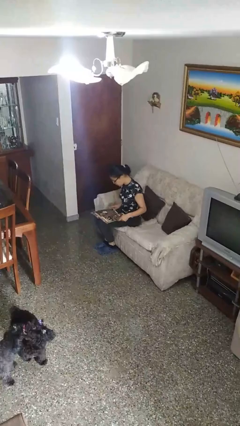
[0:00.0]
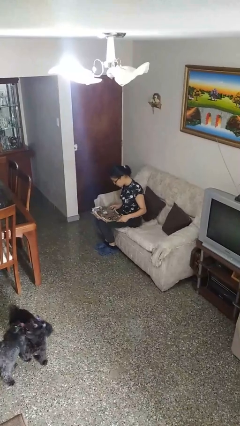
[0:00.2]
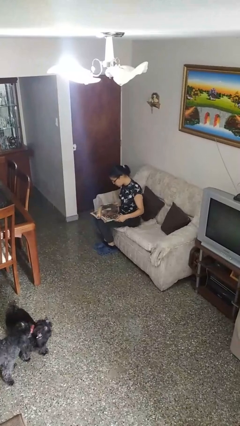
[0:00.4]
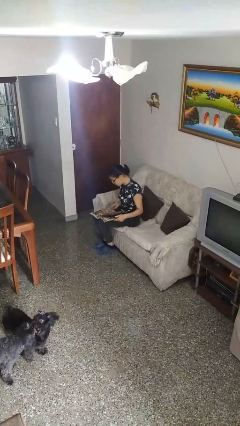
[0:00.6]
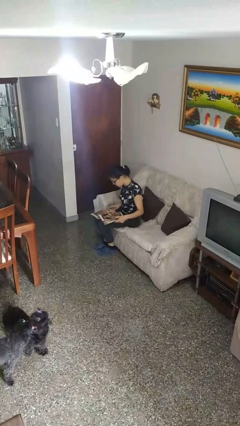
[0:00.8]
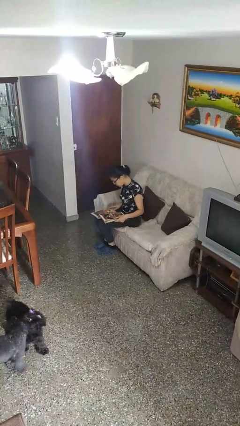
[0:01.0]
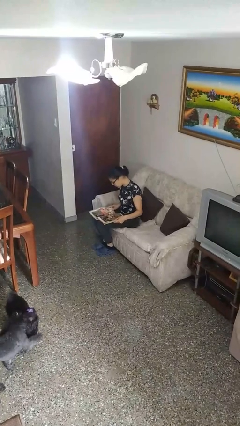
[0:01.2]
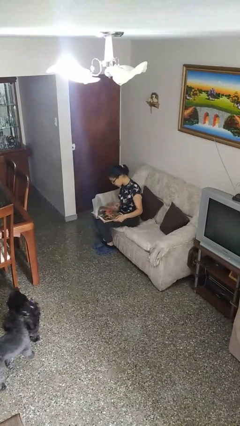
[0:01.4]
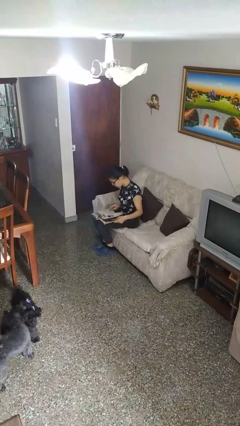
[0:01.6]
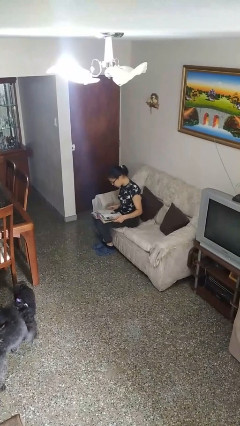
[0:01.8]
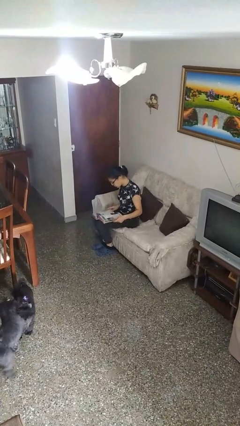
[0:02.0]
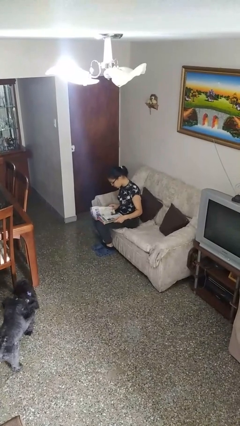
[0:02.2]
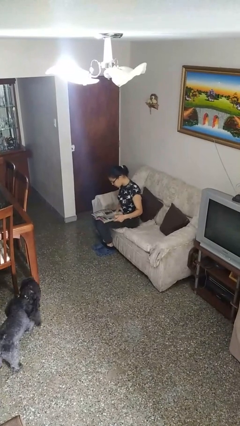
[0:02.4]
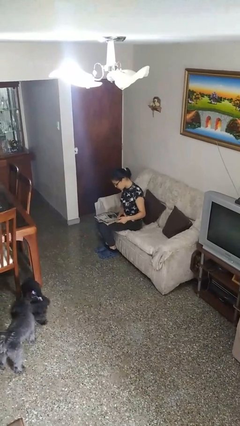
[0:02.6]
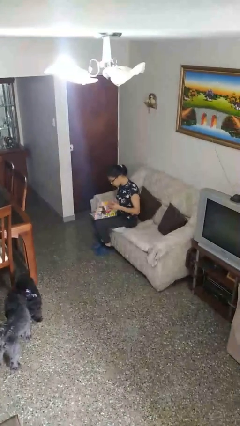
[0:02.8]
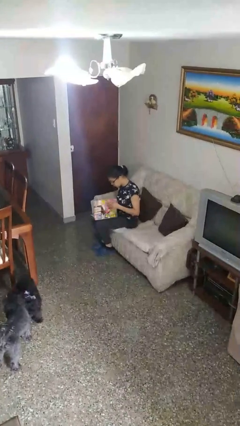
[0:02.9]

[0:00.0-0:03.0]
person reads magazine

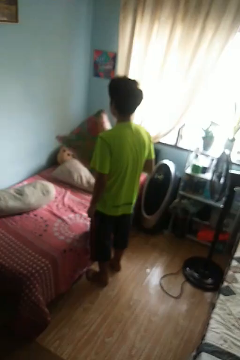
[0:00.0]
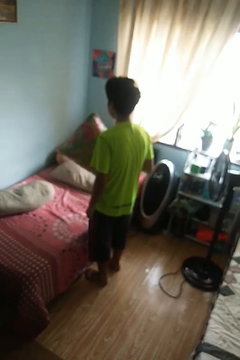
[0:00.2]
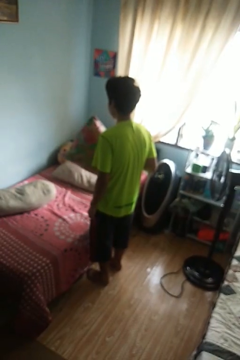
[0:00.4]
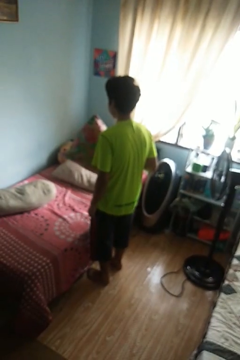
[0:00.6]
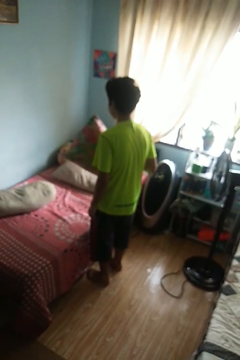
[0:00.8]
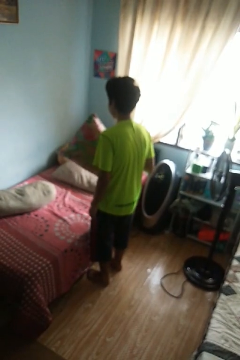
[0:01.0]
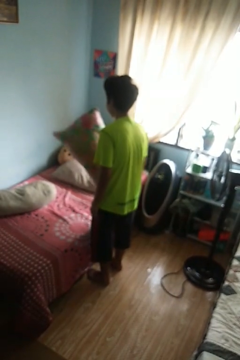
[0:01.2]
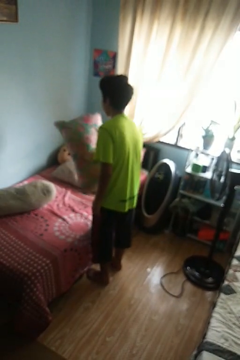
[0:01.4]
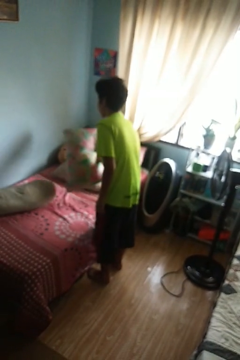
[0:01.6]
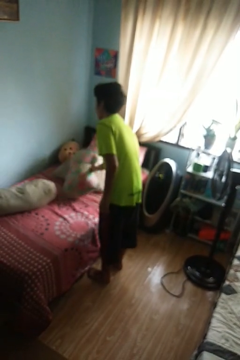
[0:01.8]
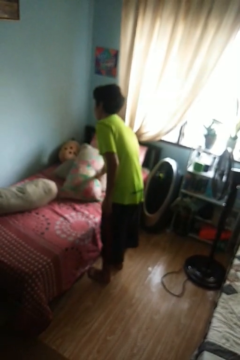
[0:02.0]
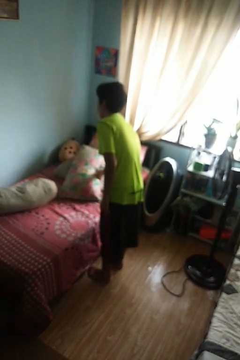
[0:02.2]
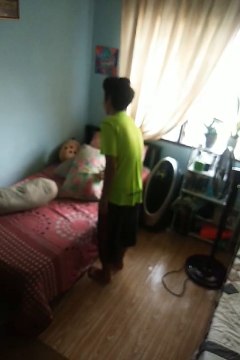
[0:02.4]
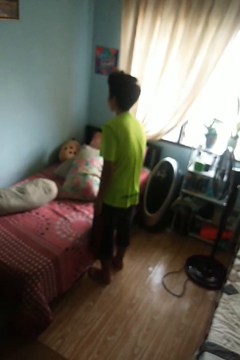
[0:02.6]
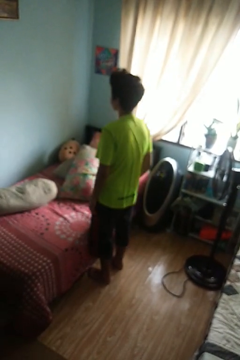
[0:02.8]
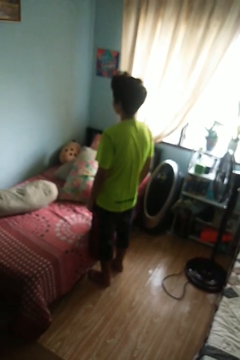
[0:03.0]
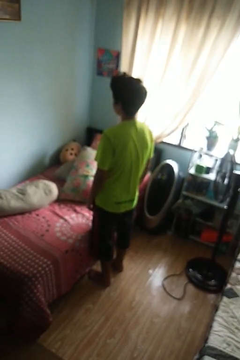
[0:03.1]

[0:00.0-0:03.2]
person puts down object on bed

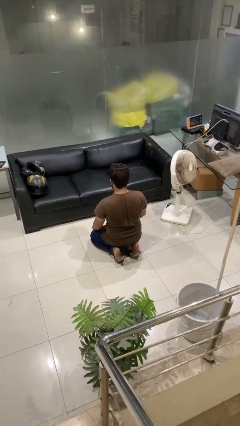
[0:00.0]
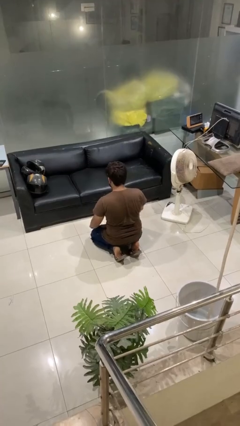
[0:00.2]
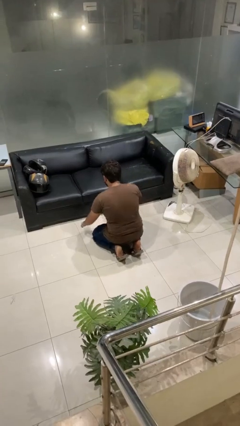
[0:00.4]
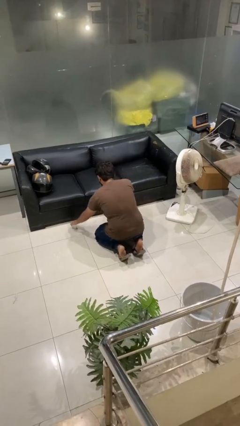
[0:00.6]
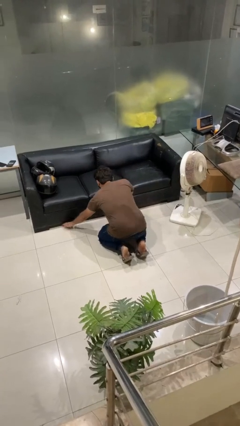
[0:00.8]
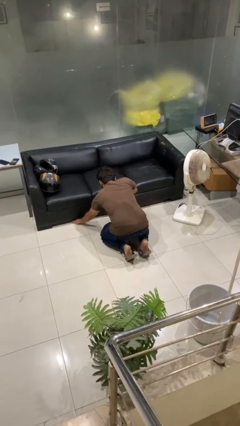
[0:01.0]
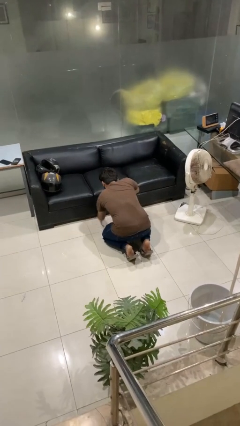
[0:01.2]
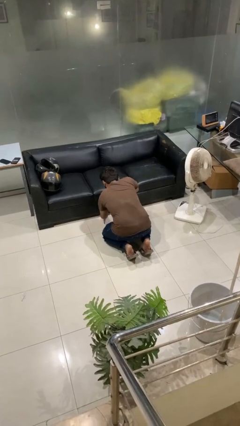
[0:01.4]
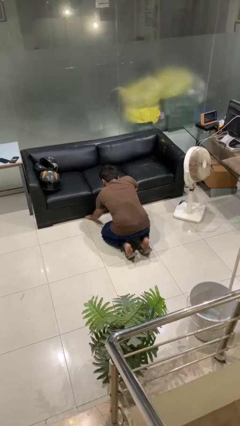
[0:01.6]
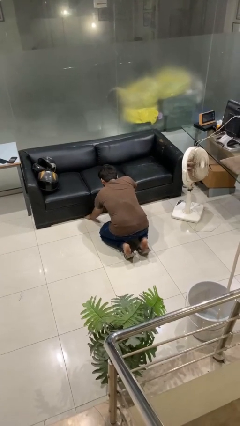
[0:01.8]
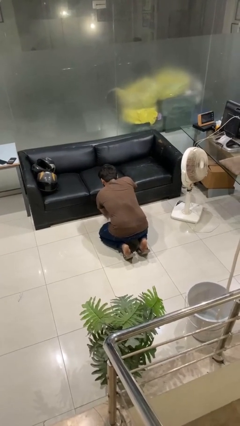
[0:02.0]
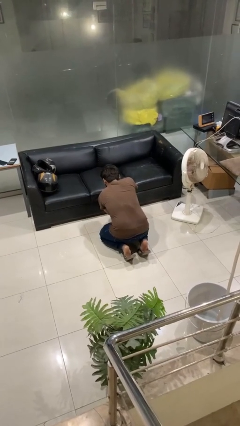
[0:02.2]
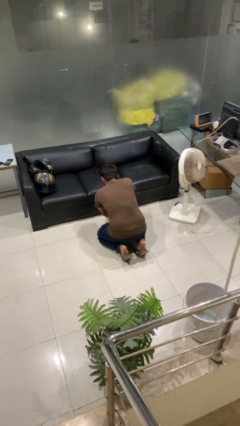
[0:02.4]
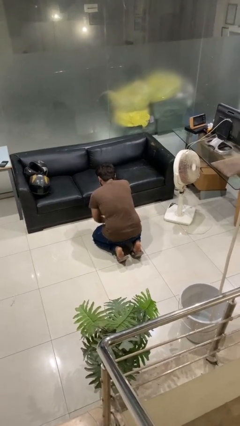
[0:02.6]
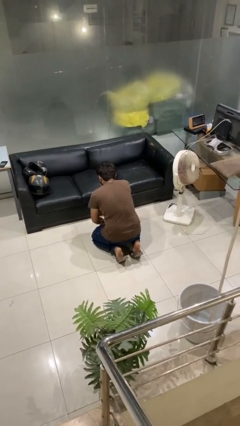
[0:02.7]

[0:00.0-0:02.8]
person searches under couch

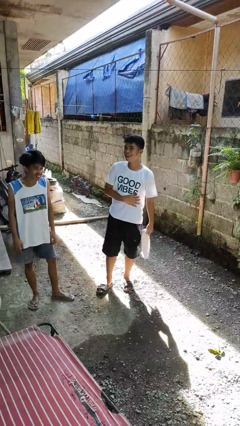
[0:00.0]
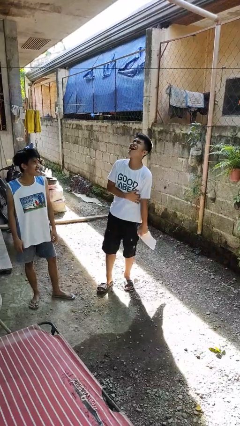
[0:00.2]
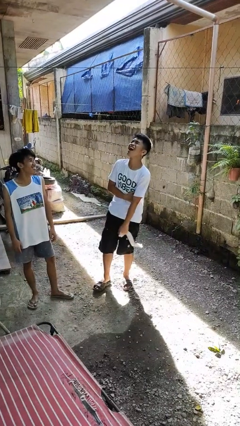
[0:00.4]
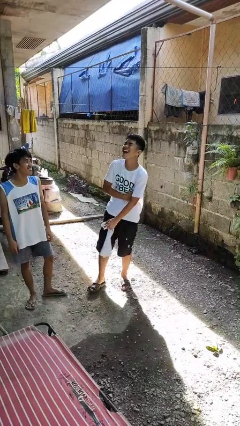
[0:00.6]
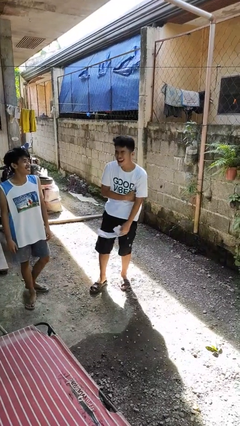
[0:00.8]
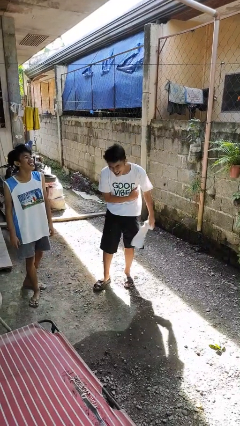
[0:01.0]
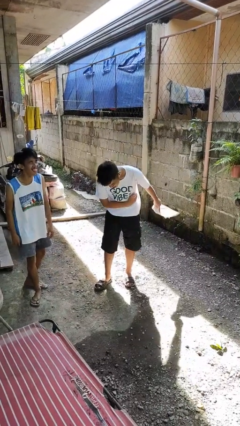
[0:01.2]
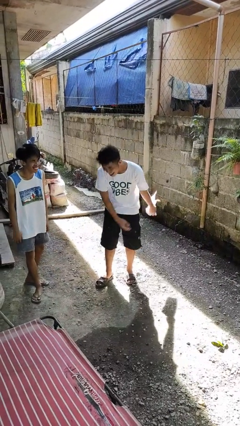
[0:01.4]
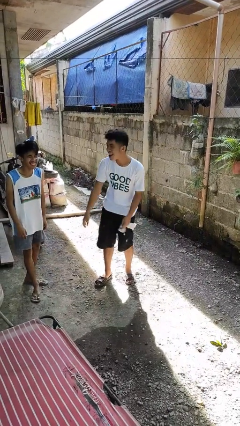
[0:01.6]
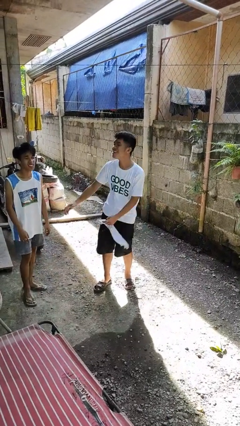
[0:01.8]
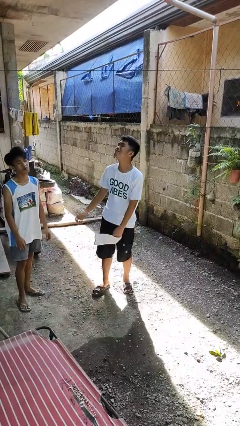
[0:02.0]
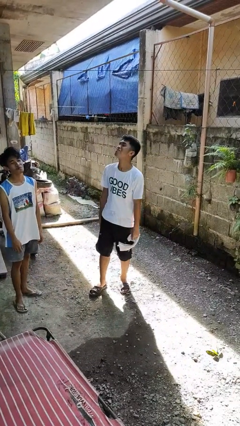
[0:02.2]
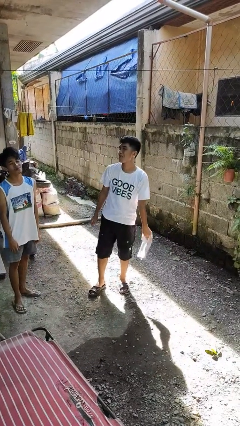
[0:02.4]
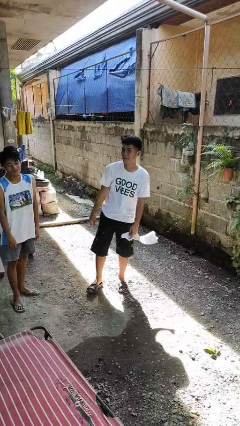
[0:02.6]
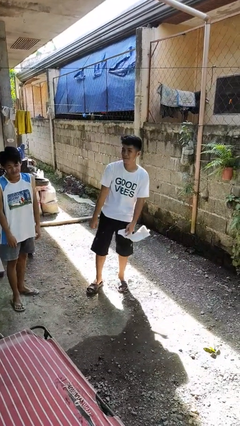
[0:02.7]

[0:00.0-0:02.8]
person laughs with person

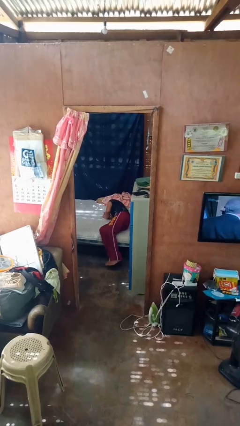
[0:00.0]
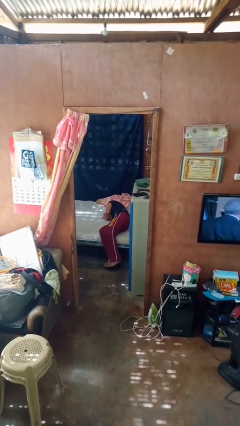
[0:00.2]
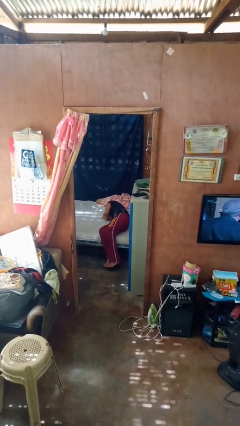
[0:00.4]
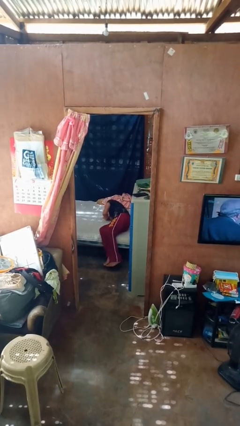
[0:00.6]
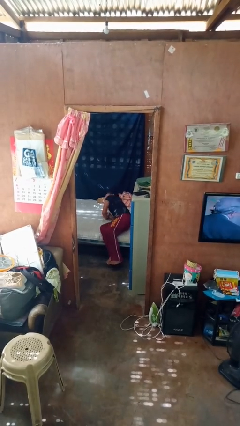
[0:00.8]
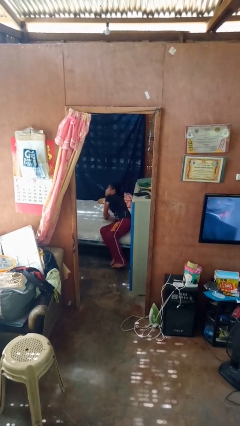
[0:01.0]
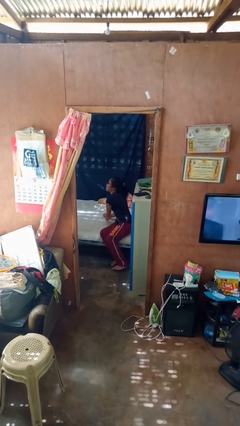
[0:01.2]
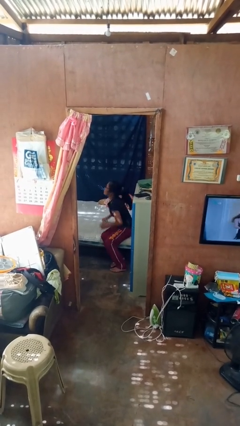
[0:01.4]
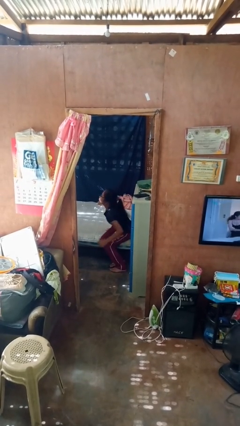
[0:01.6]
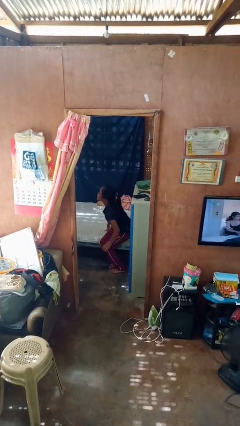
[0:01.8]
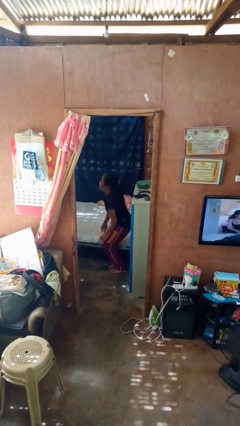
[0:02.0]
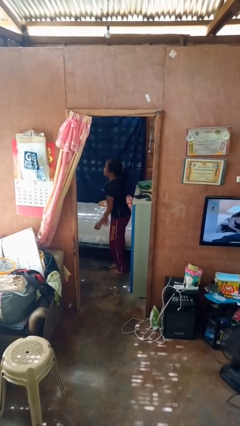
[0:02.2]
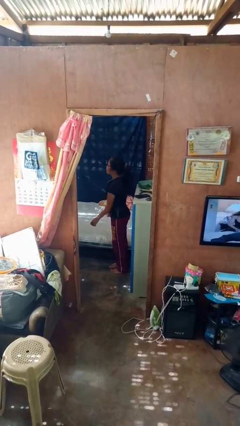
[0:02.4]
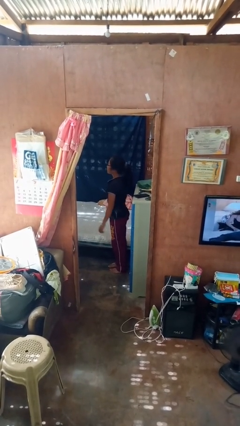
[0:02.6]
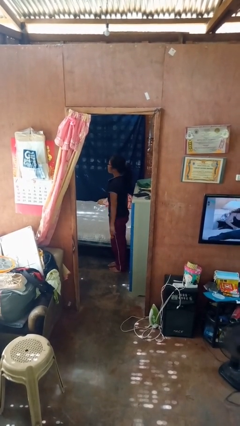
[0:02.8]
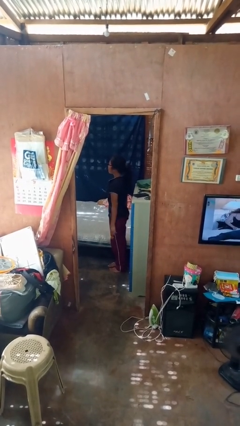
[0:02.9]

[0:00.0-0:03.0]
person stands up

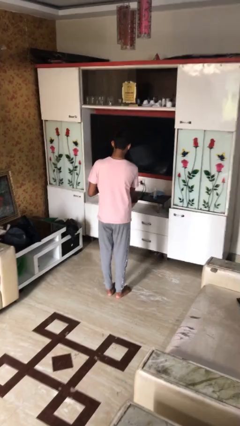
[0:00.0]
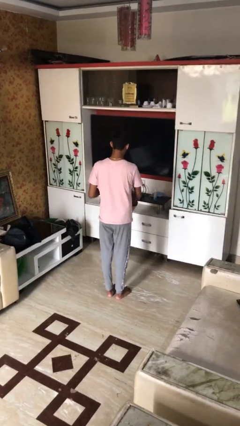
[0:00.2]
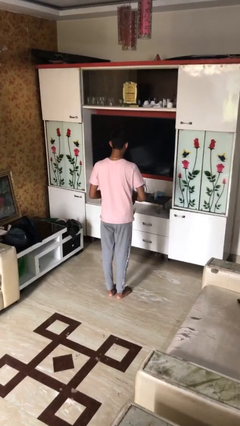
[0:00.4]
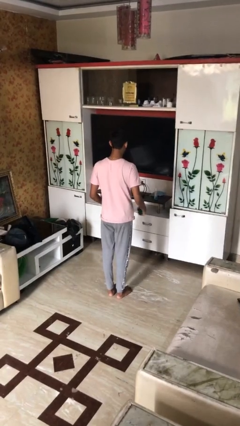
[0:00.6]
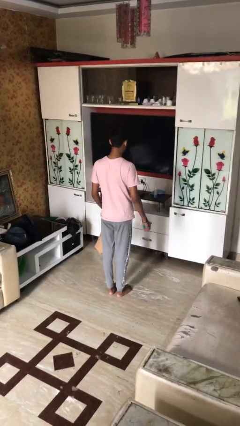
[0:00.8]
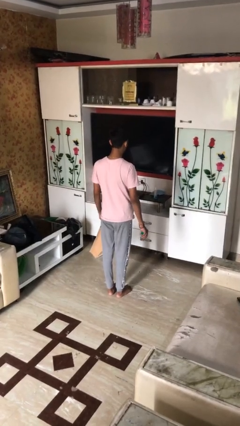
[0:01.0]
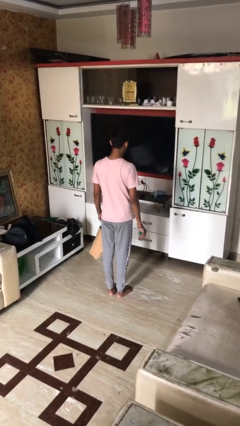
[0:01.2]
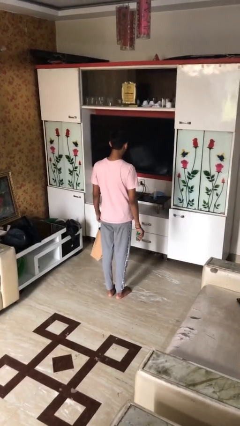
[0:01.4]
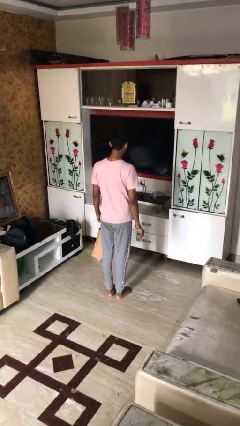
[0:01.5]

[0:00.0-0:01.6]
person takes object from bag

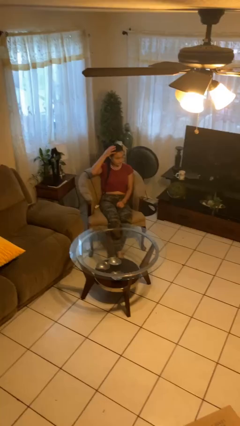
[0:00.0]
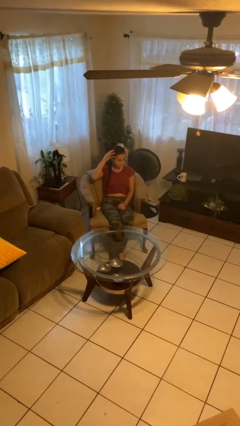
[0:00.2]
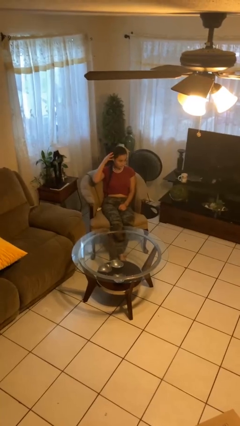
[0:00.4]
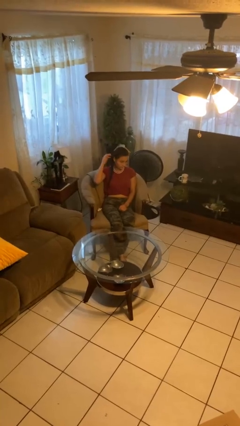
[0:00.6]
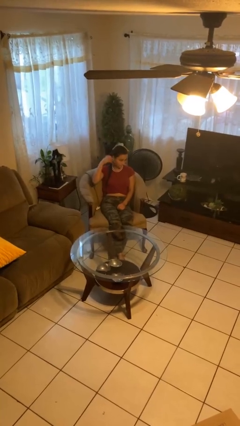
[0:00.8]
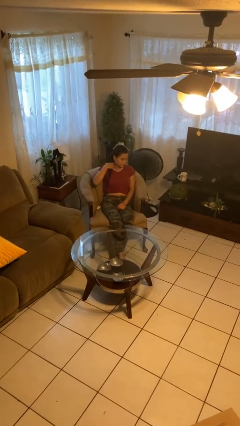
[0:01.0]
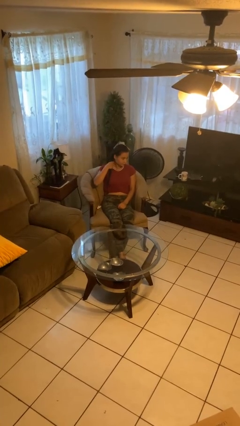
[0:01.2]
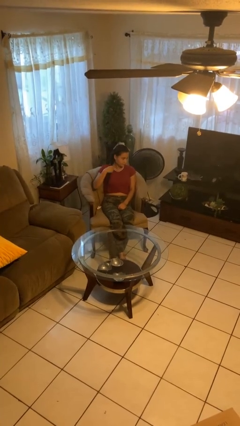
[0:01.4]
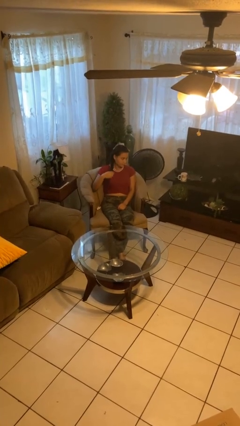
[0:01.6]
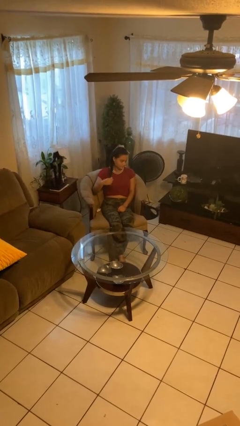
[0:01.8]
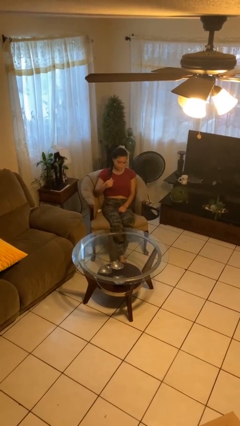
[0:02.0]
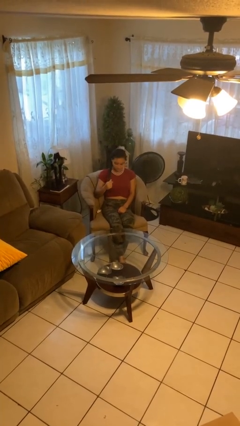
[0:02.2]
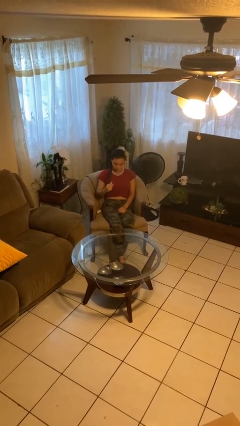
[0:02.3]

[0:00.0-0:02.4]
person strokes hair
